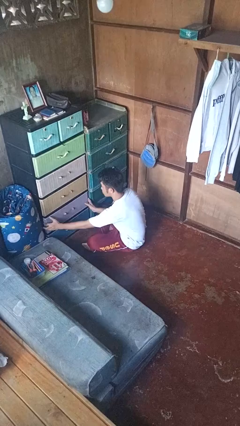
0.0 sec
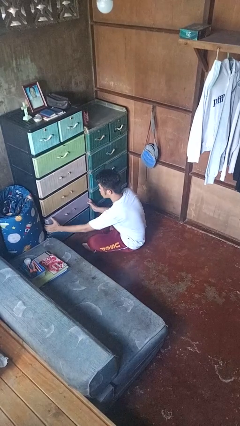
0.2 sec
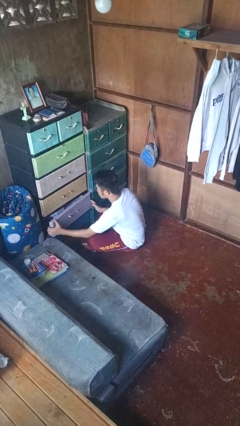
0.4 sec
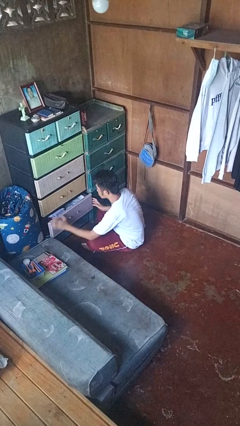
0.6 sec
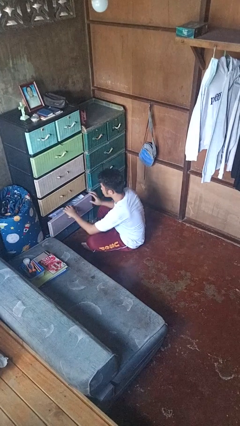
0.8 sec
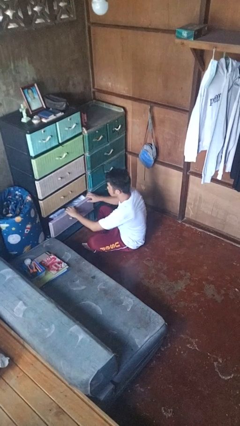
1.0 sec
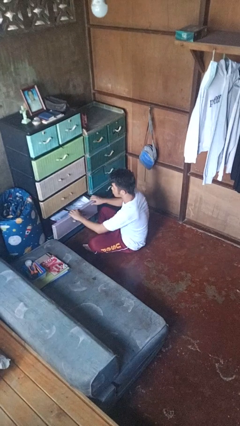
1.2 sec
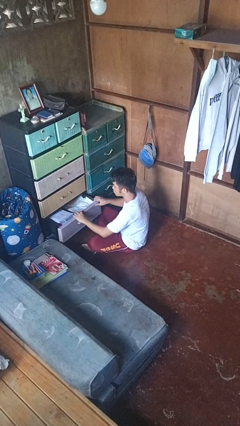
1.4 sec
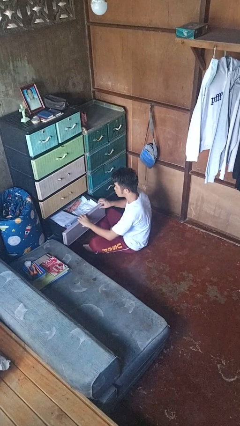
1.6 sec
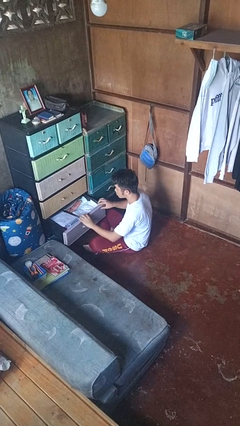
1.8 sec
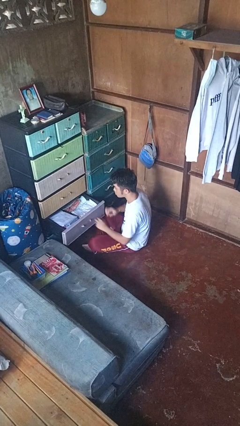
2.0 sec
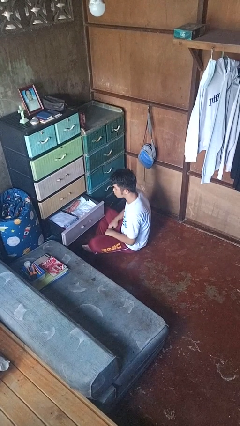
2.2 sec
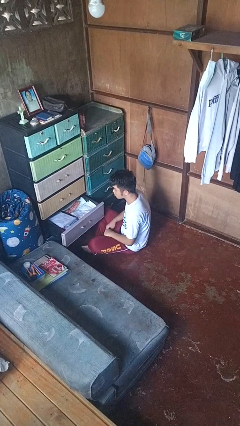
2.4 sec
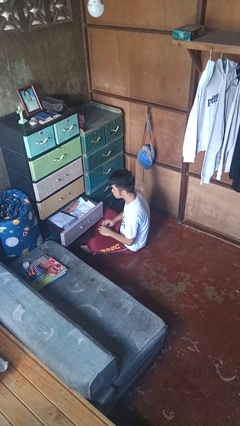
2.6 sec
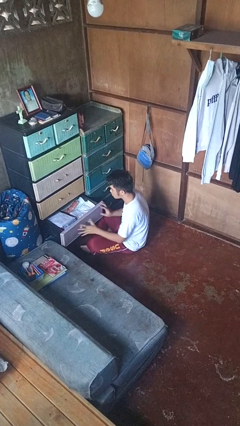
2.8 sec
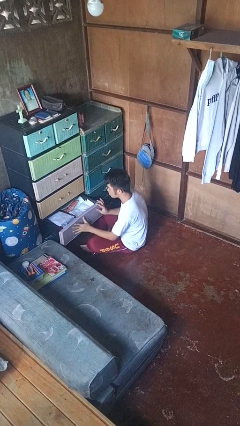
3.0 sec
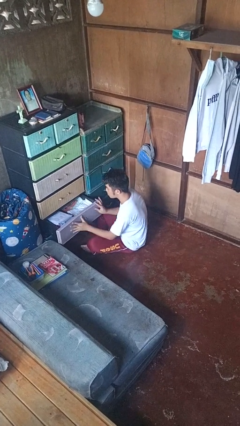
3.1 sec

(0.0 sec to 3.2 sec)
person opens dresser drawer

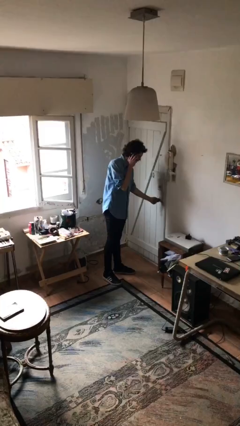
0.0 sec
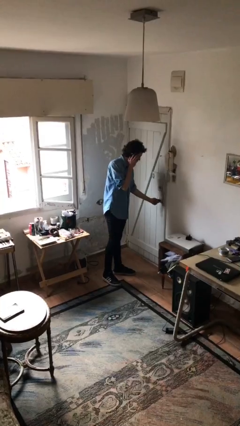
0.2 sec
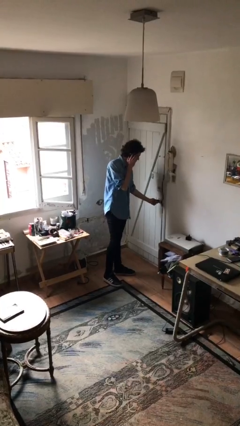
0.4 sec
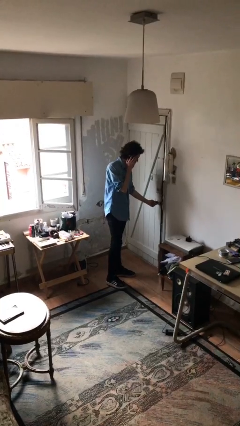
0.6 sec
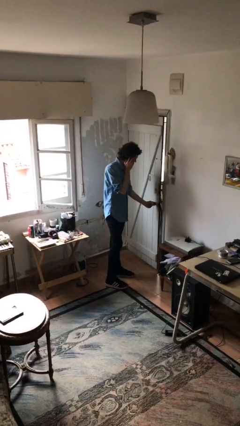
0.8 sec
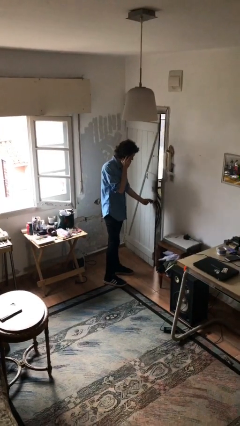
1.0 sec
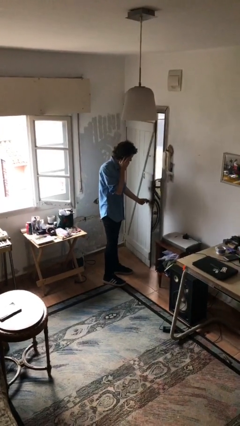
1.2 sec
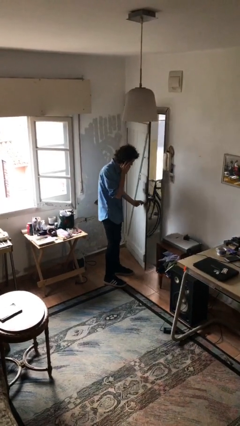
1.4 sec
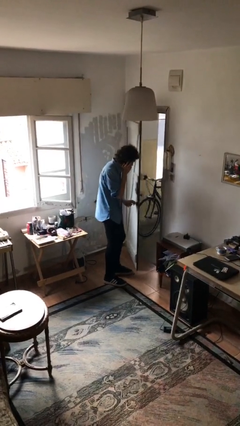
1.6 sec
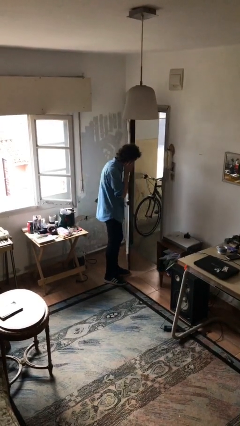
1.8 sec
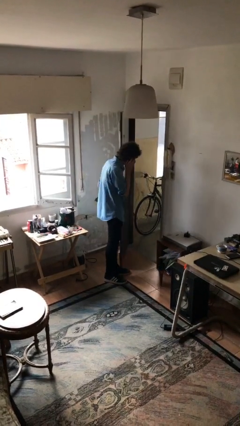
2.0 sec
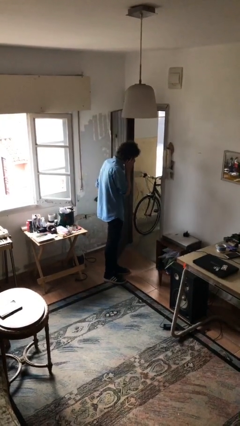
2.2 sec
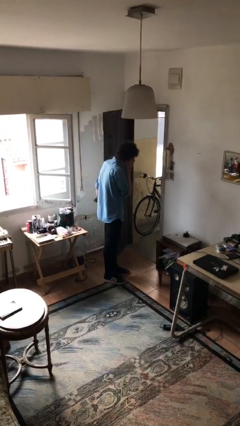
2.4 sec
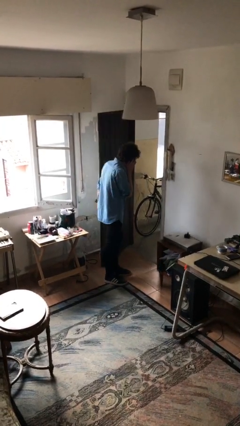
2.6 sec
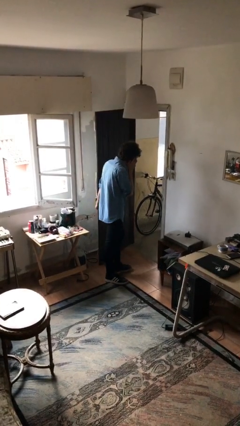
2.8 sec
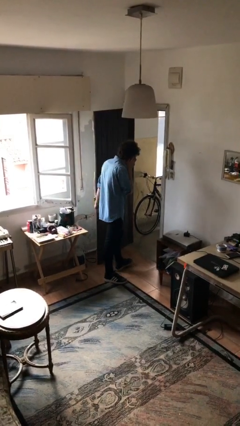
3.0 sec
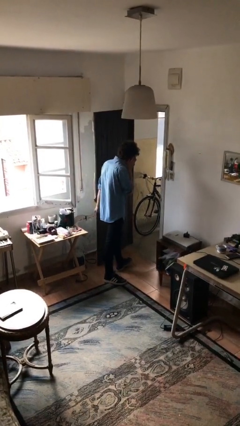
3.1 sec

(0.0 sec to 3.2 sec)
person opens facility door

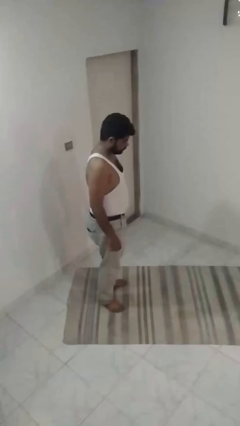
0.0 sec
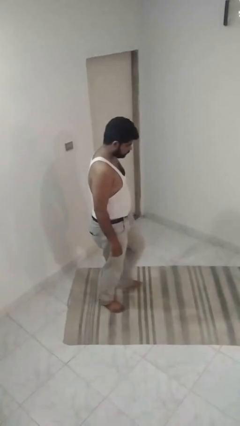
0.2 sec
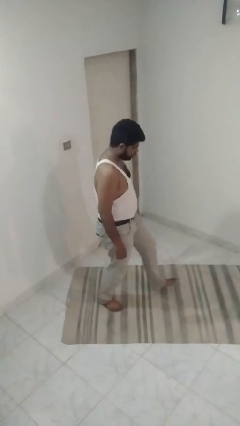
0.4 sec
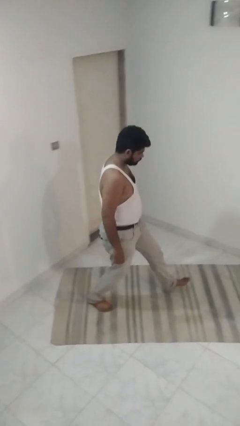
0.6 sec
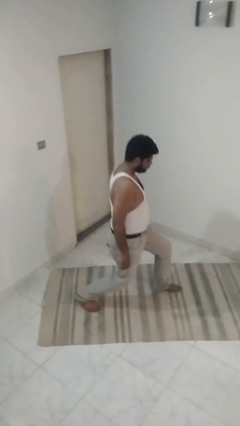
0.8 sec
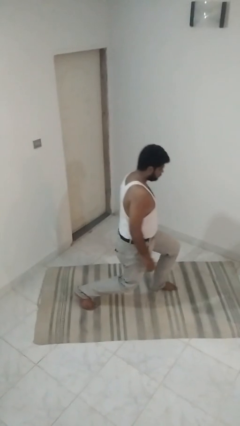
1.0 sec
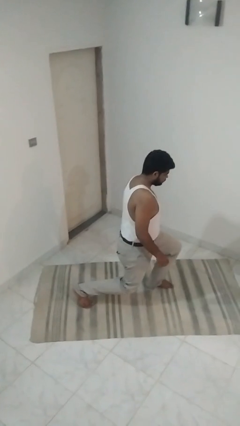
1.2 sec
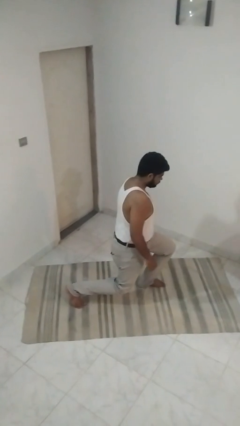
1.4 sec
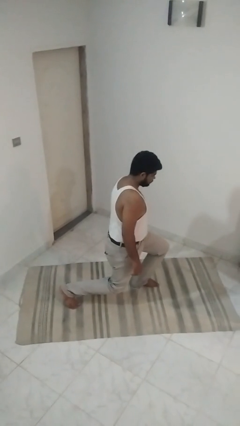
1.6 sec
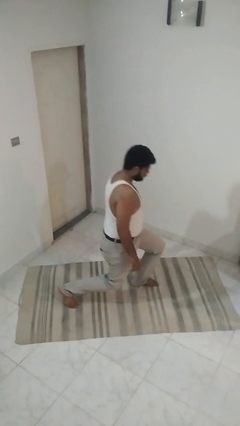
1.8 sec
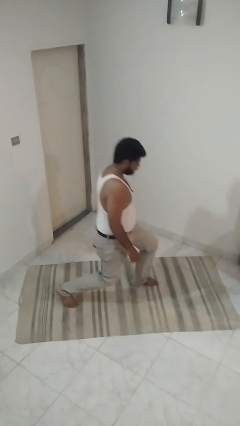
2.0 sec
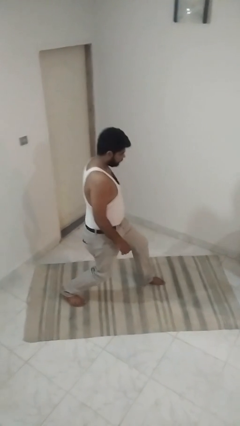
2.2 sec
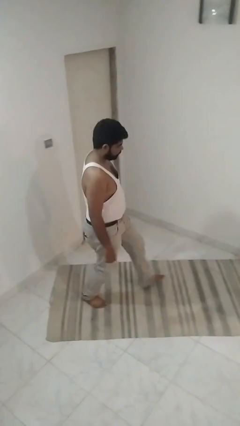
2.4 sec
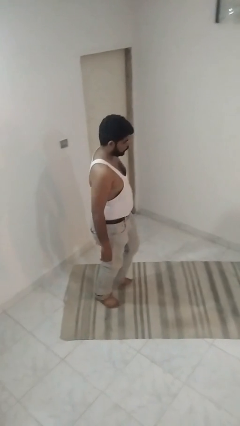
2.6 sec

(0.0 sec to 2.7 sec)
person exercises with lunges

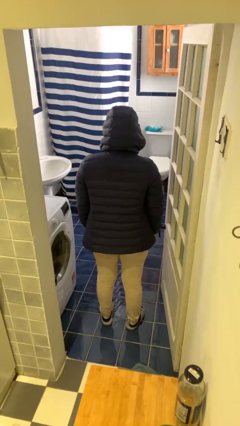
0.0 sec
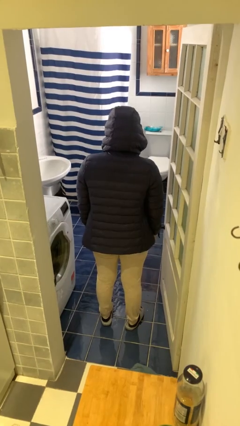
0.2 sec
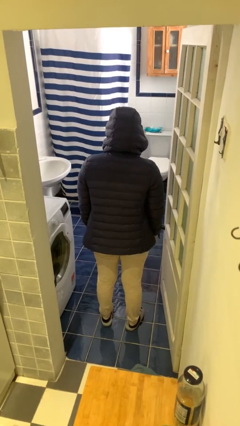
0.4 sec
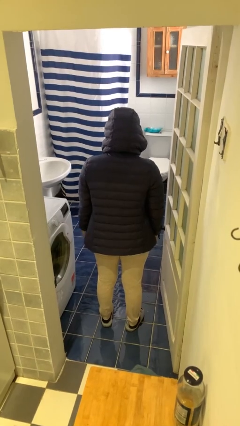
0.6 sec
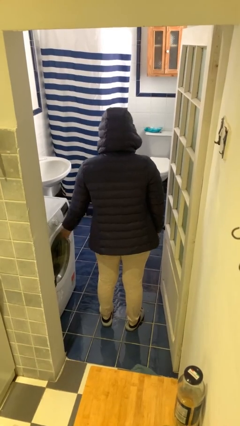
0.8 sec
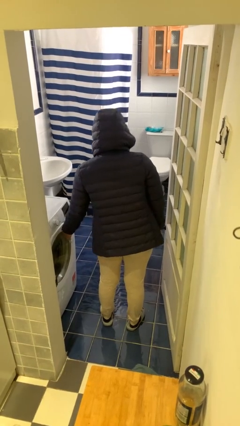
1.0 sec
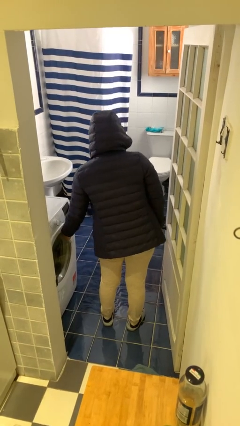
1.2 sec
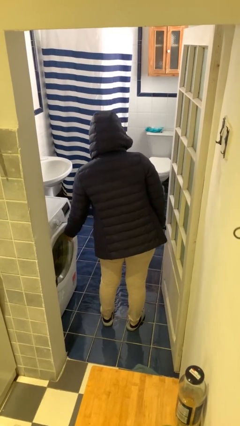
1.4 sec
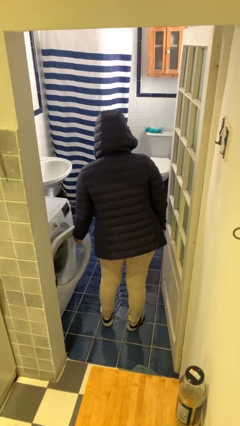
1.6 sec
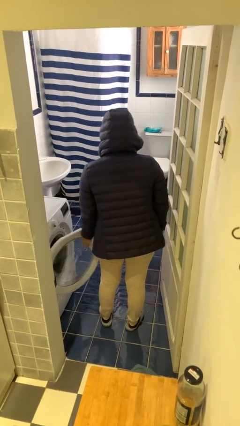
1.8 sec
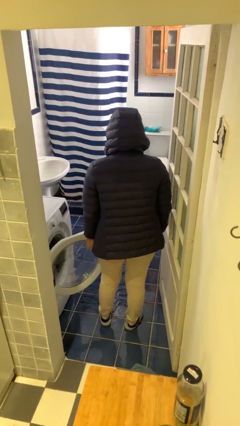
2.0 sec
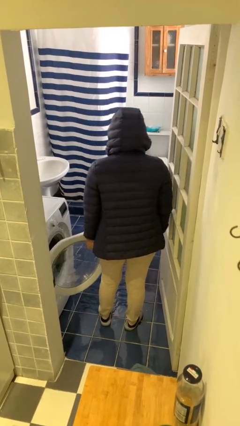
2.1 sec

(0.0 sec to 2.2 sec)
person opens clothes washer

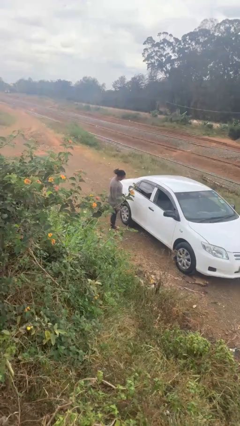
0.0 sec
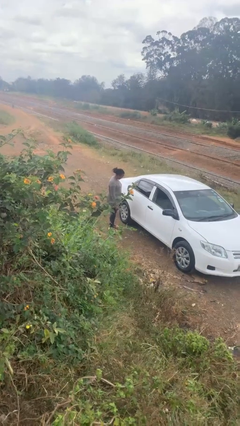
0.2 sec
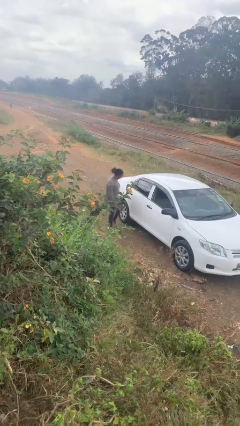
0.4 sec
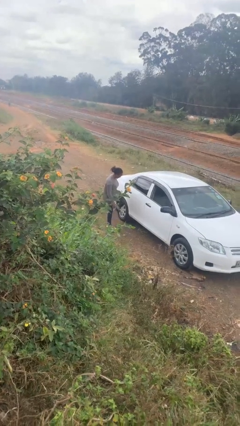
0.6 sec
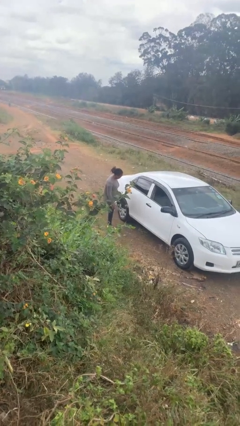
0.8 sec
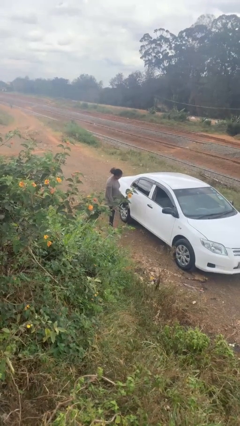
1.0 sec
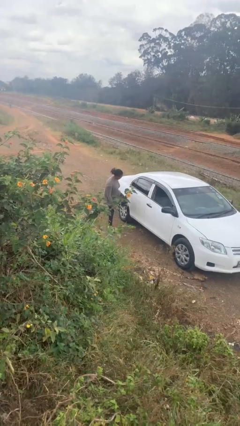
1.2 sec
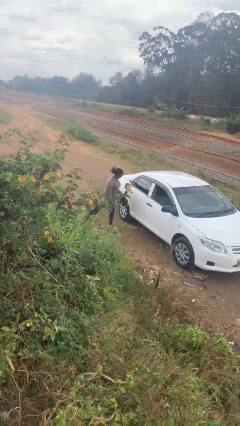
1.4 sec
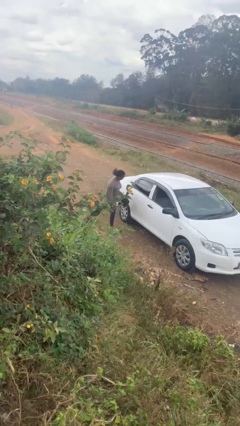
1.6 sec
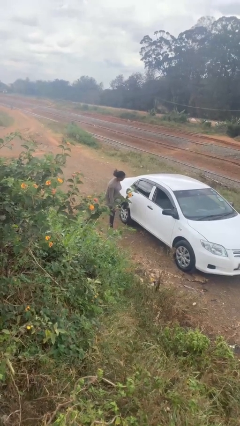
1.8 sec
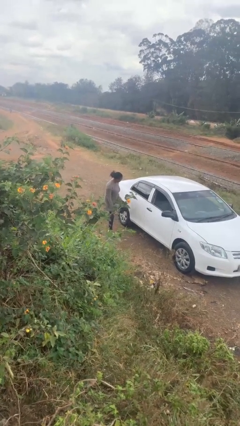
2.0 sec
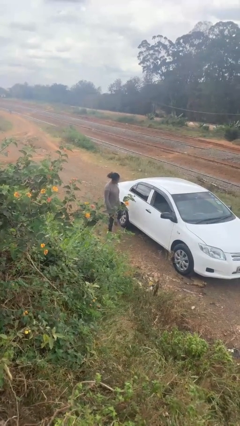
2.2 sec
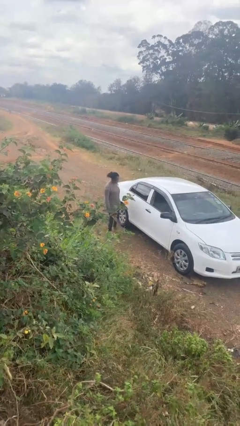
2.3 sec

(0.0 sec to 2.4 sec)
person kicks car tires

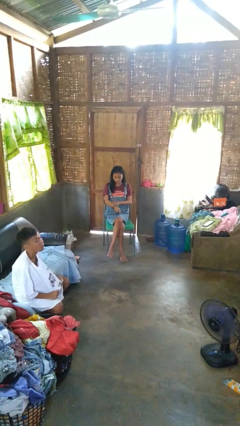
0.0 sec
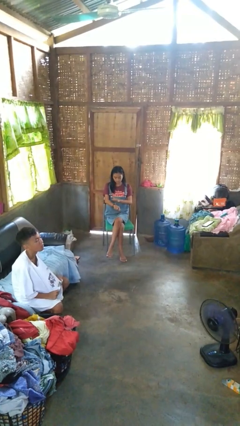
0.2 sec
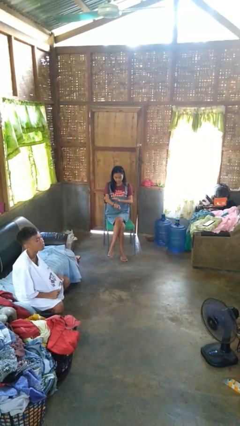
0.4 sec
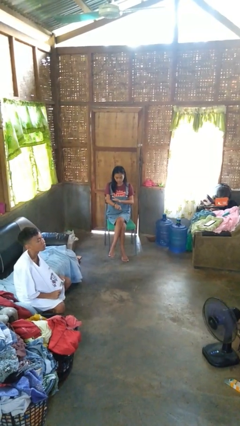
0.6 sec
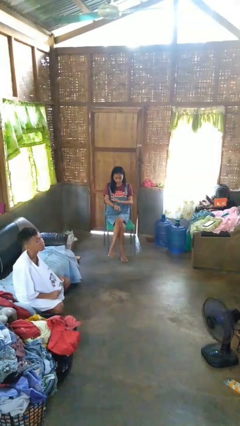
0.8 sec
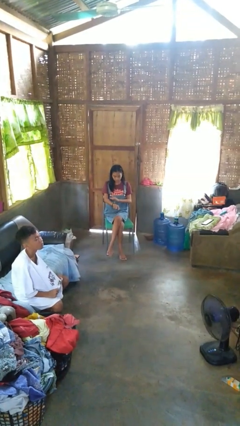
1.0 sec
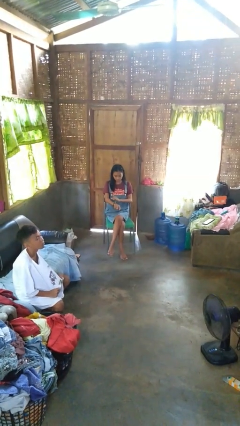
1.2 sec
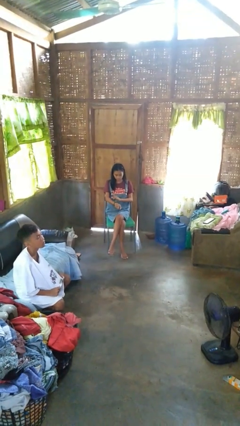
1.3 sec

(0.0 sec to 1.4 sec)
person swats bug

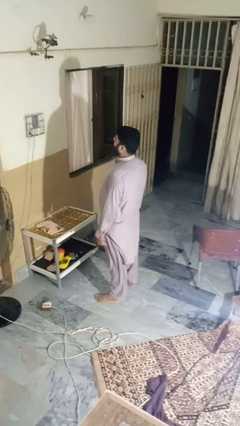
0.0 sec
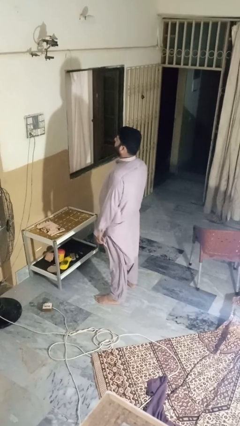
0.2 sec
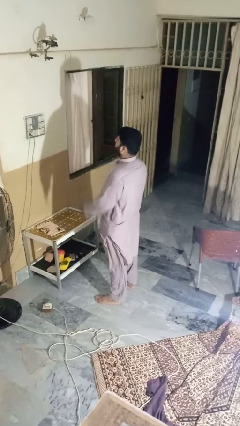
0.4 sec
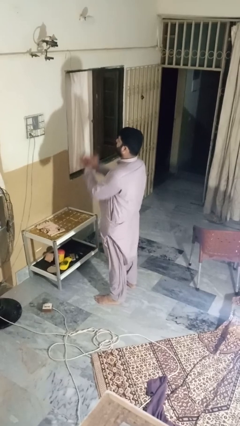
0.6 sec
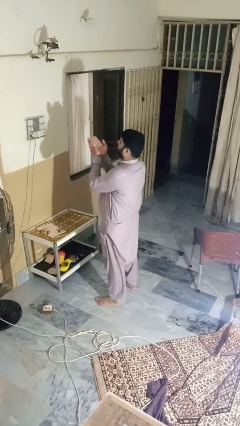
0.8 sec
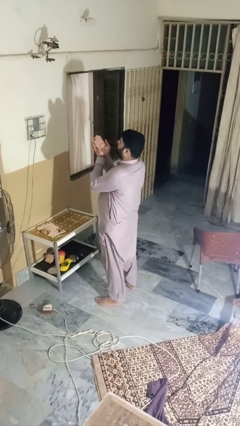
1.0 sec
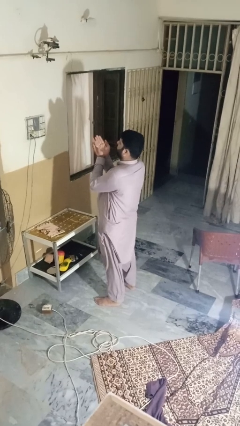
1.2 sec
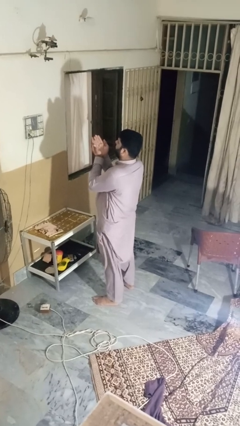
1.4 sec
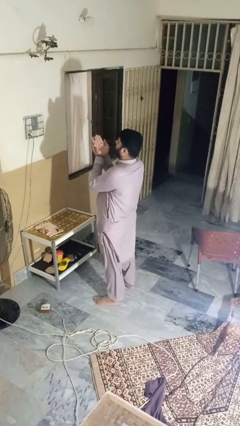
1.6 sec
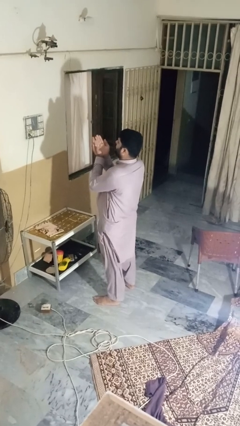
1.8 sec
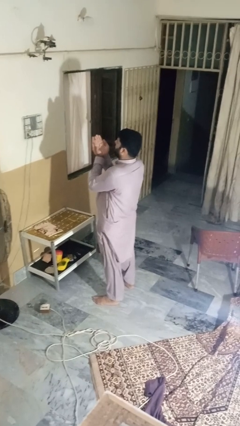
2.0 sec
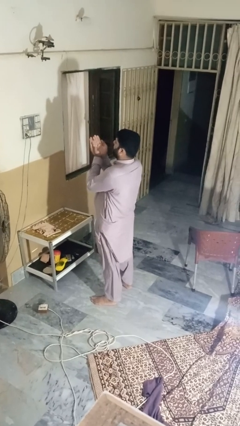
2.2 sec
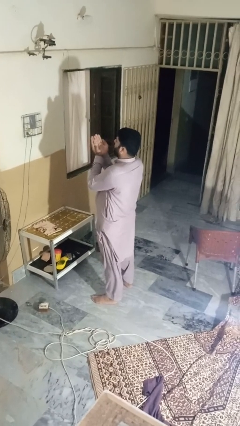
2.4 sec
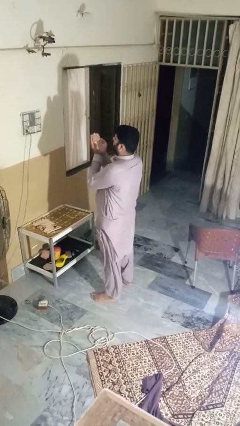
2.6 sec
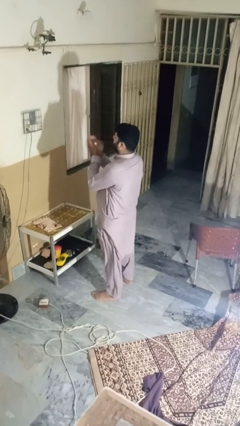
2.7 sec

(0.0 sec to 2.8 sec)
person prays
